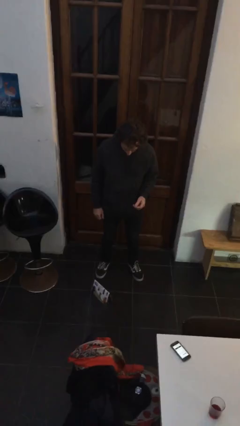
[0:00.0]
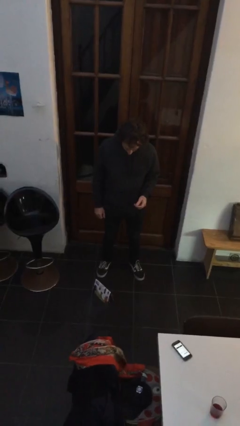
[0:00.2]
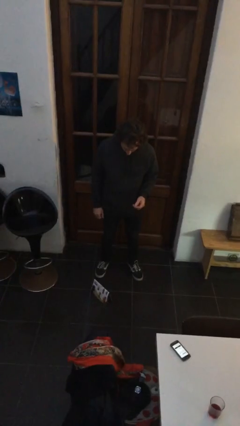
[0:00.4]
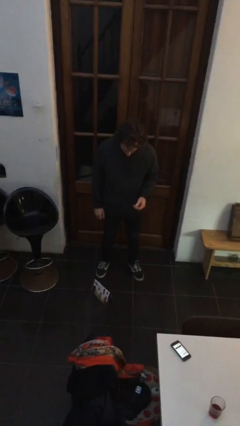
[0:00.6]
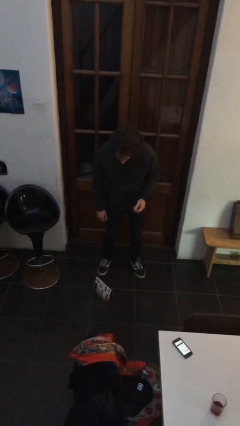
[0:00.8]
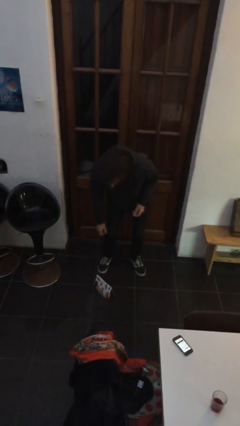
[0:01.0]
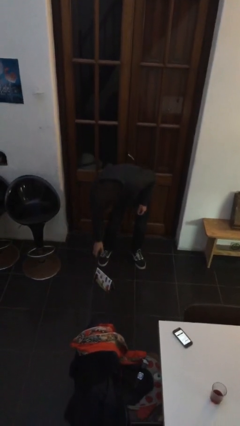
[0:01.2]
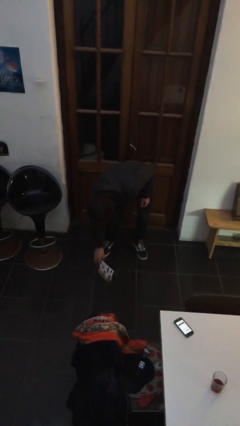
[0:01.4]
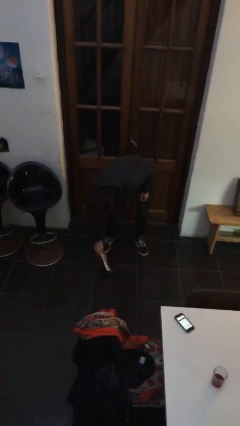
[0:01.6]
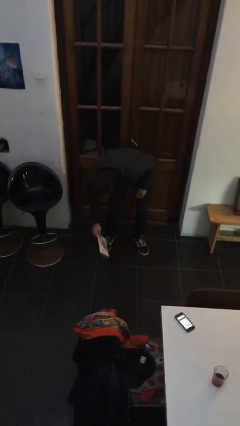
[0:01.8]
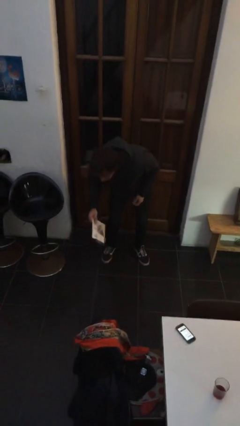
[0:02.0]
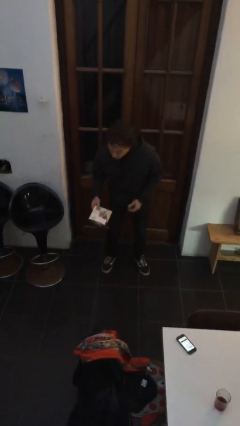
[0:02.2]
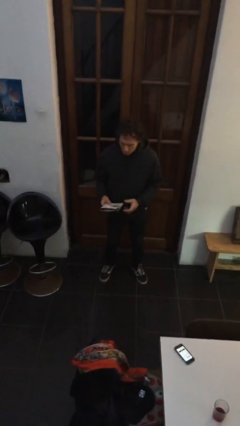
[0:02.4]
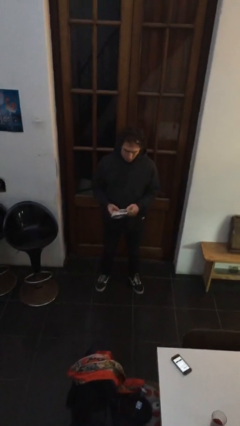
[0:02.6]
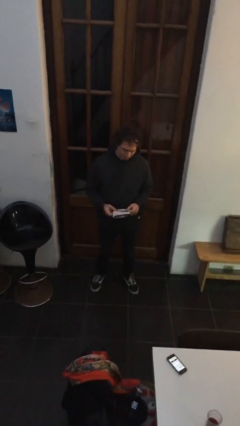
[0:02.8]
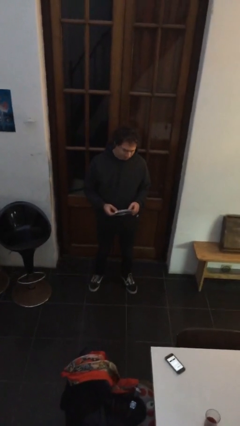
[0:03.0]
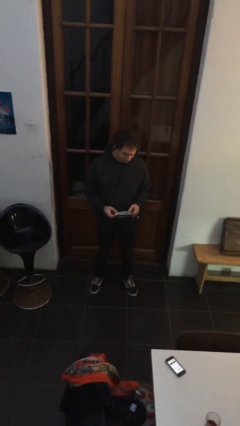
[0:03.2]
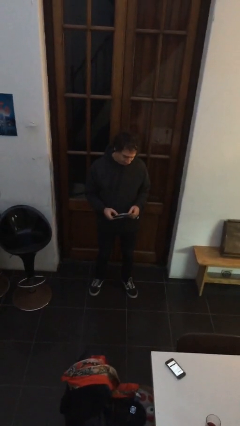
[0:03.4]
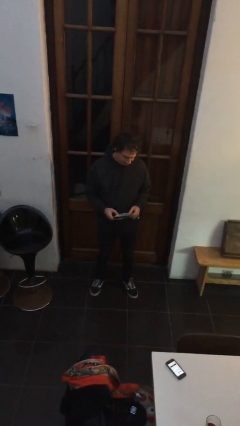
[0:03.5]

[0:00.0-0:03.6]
person picks up object from floor

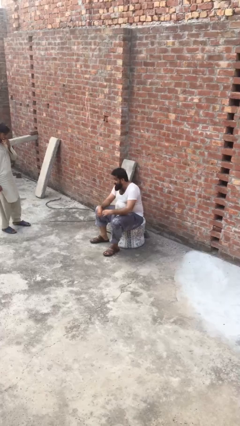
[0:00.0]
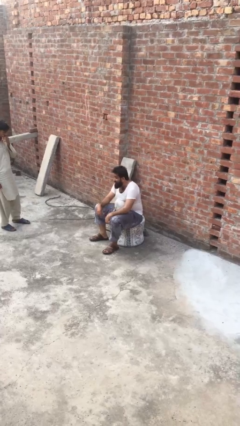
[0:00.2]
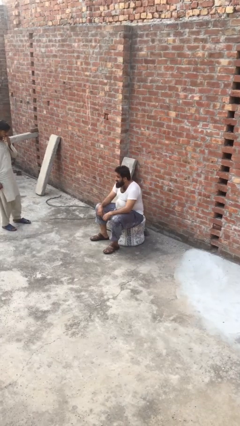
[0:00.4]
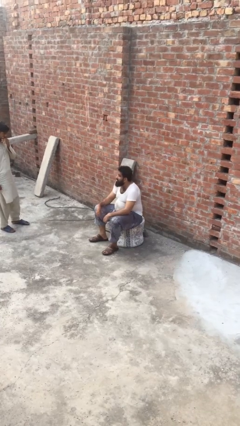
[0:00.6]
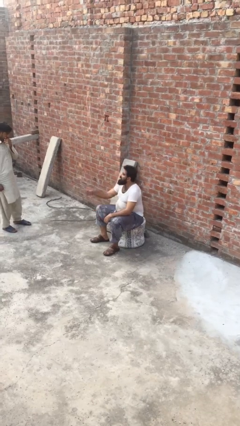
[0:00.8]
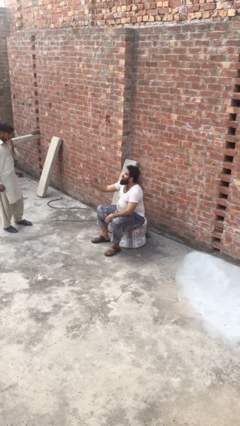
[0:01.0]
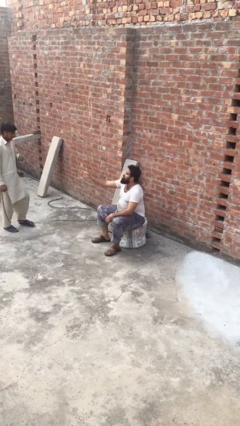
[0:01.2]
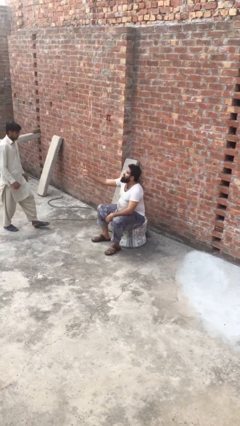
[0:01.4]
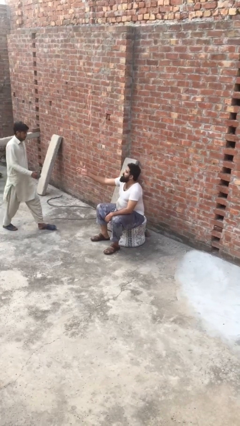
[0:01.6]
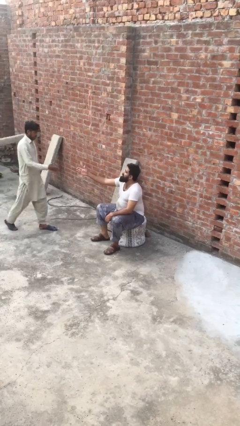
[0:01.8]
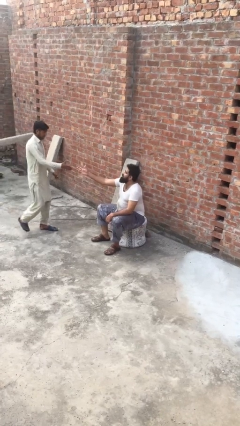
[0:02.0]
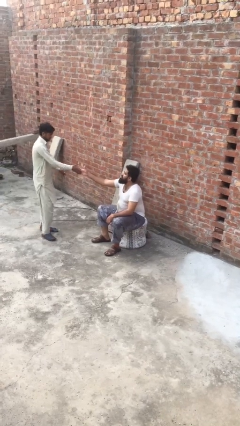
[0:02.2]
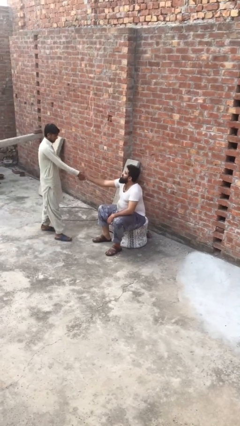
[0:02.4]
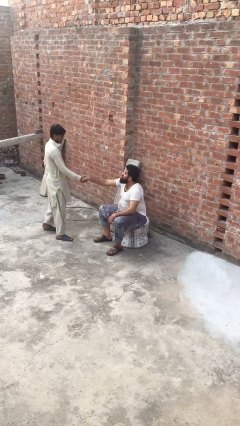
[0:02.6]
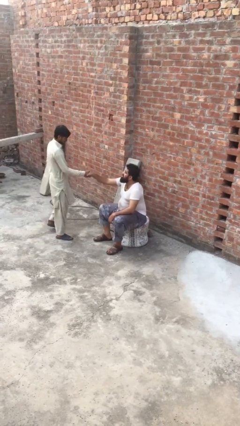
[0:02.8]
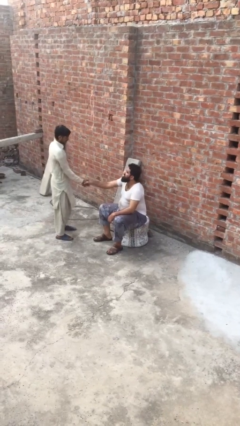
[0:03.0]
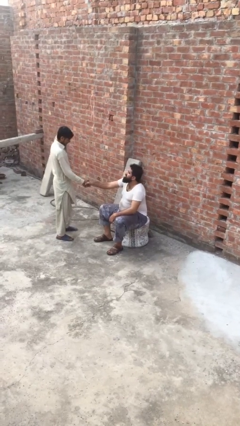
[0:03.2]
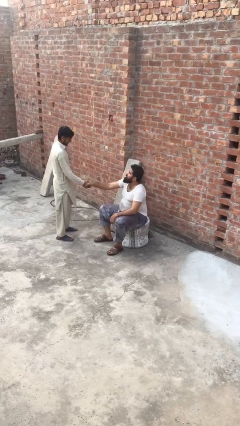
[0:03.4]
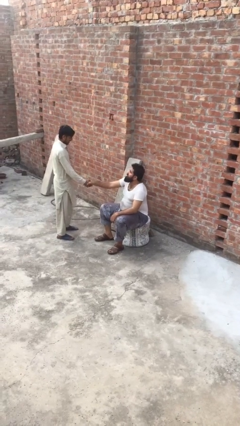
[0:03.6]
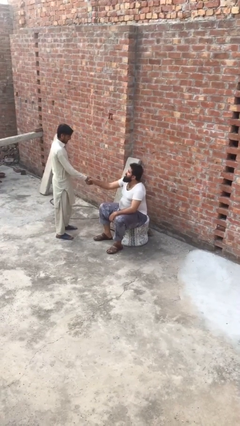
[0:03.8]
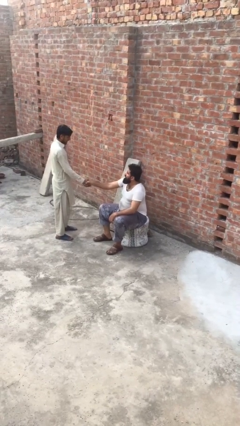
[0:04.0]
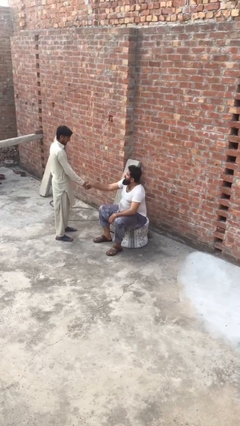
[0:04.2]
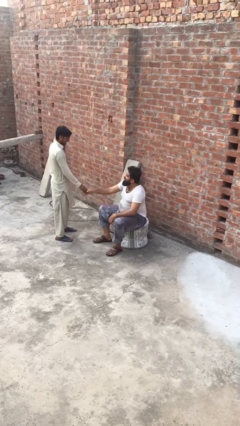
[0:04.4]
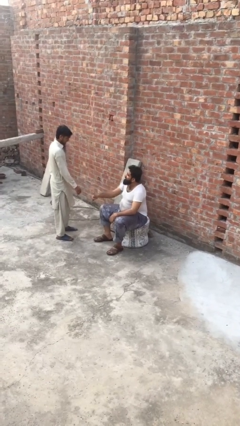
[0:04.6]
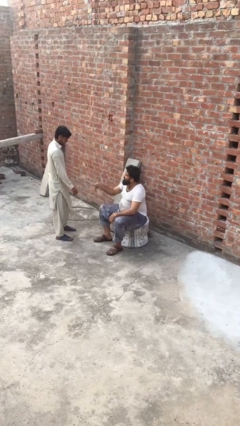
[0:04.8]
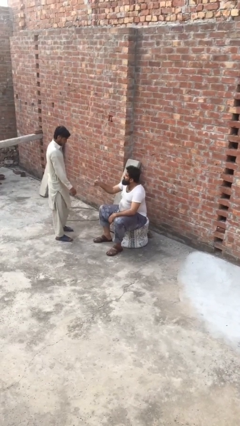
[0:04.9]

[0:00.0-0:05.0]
person shakes hand

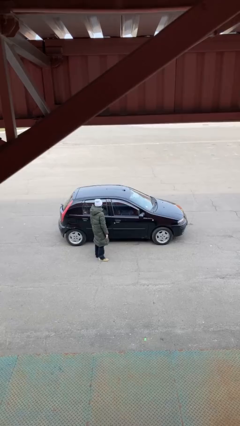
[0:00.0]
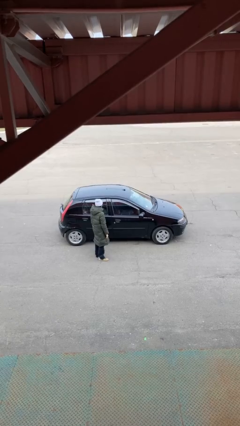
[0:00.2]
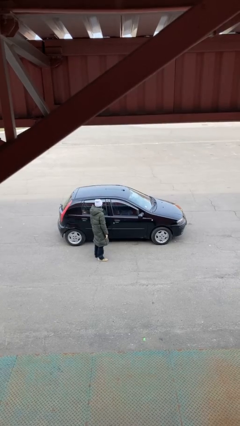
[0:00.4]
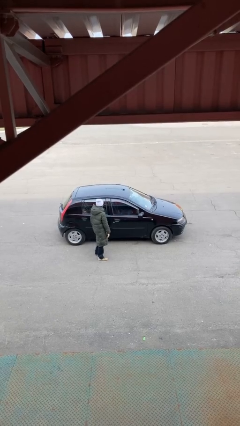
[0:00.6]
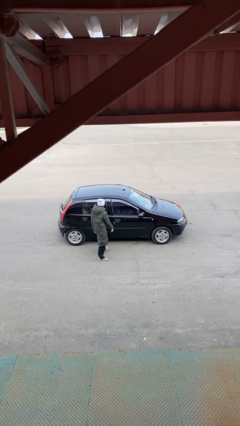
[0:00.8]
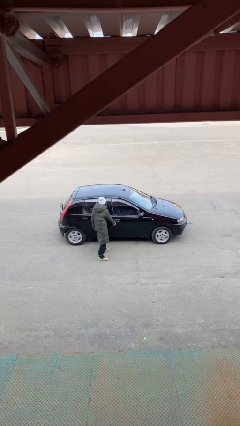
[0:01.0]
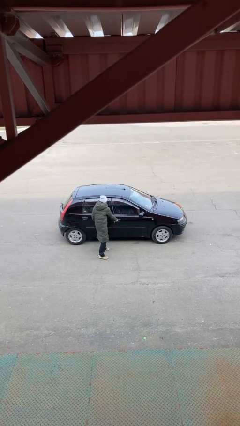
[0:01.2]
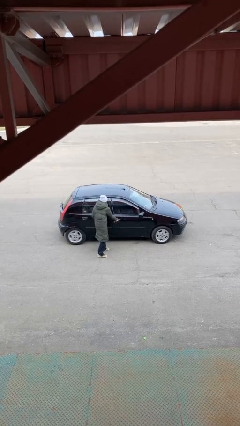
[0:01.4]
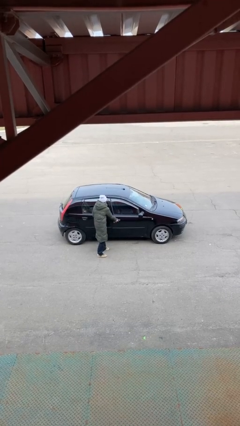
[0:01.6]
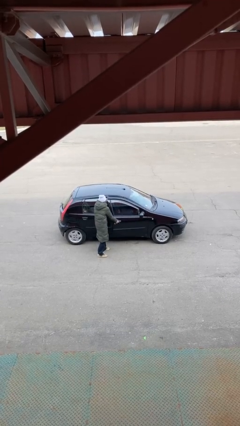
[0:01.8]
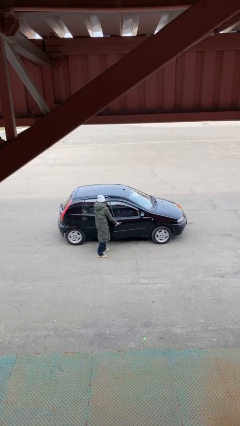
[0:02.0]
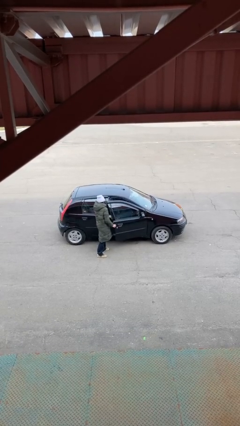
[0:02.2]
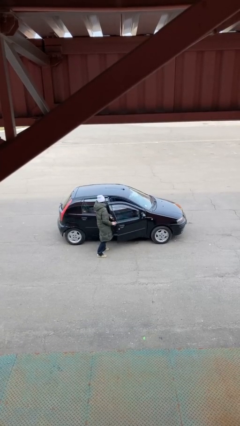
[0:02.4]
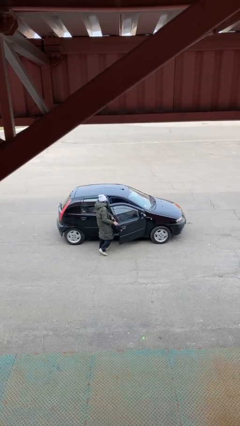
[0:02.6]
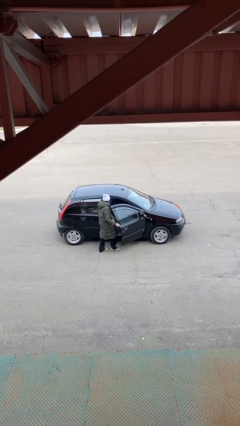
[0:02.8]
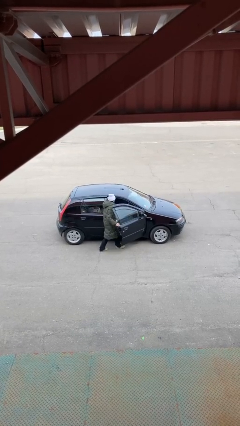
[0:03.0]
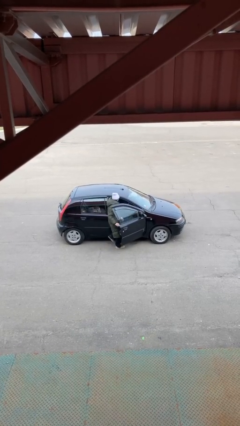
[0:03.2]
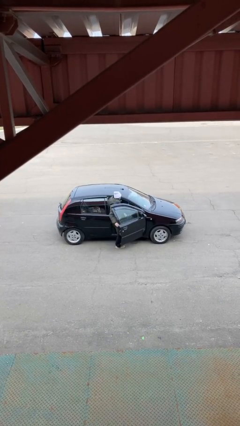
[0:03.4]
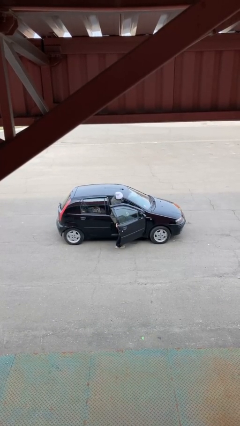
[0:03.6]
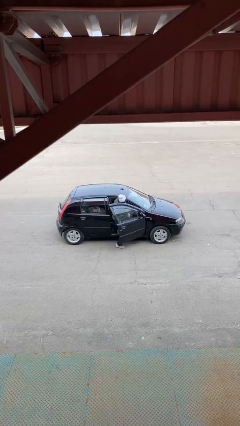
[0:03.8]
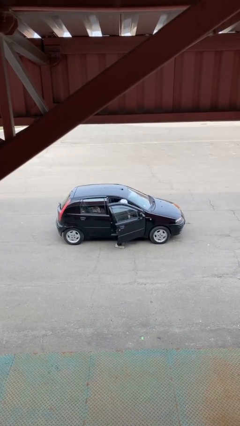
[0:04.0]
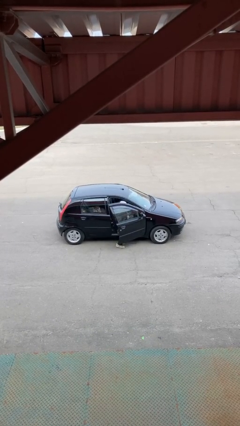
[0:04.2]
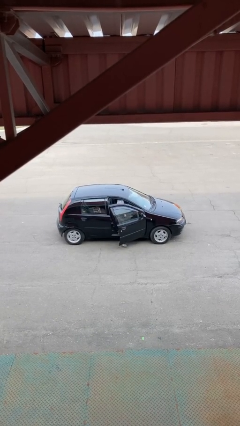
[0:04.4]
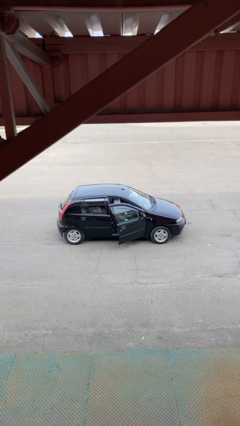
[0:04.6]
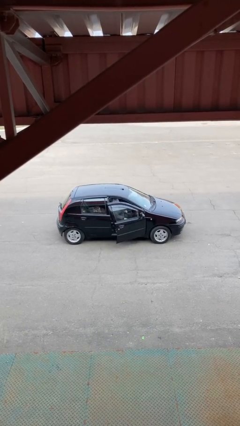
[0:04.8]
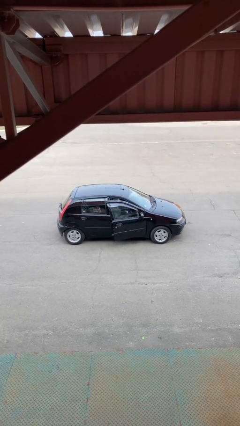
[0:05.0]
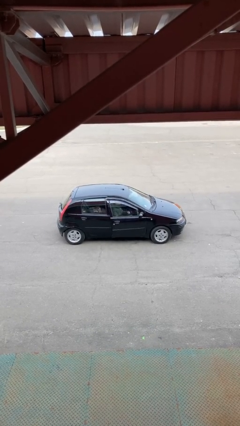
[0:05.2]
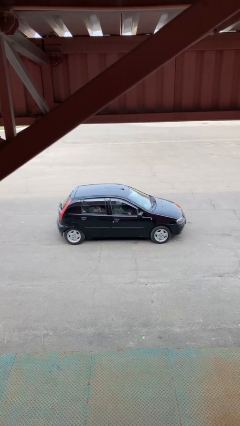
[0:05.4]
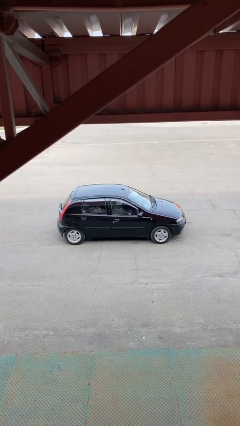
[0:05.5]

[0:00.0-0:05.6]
car picks up person

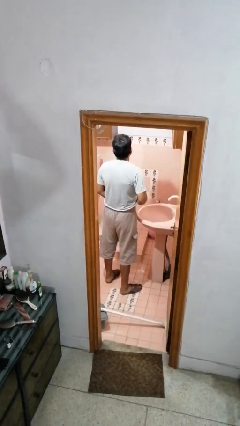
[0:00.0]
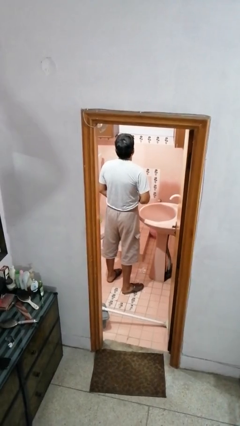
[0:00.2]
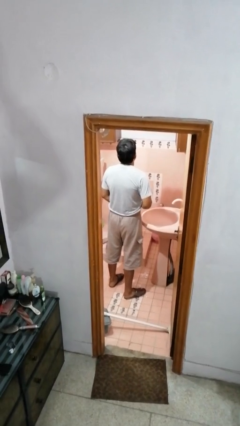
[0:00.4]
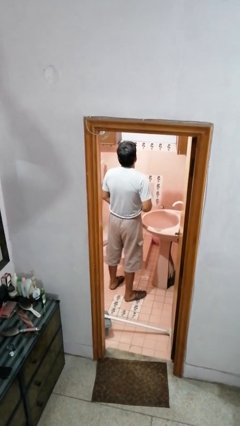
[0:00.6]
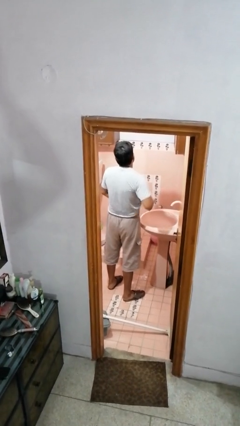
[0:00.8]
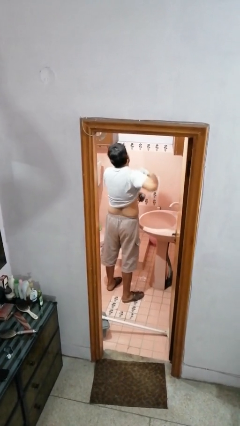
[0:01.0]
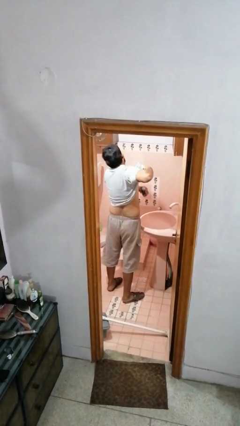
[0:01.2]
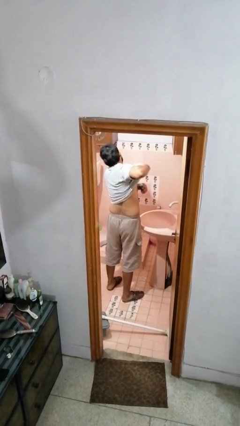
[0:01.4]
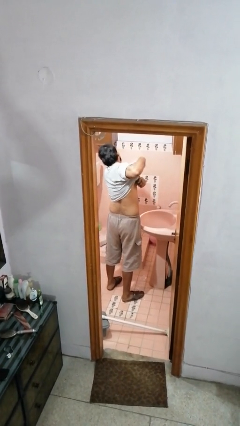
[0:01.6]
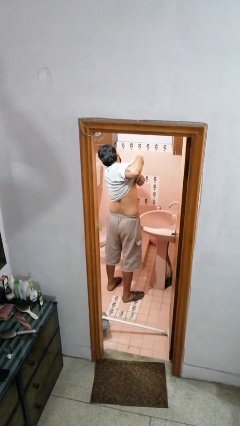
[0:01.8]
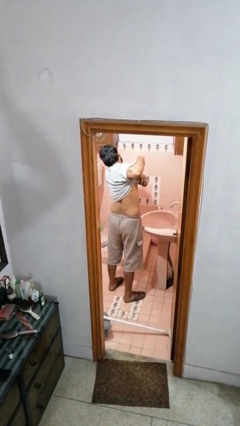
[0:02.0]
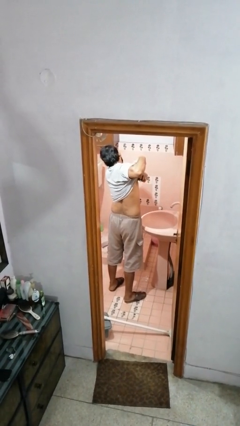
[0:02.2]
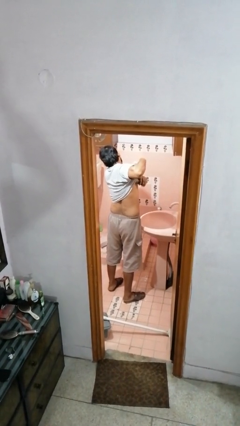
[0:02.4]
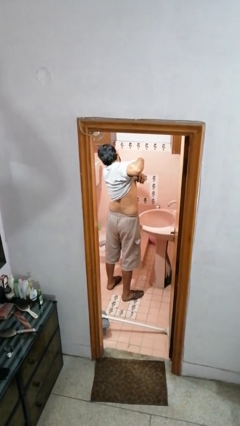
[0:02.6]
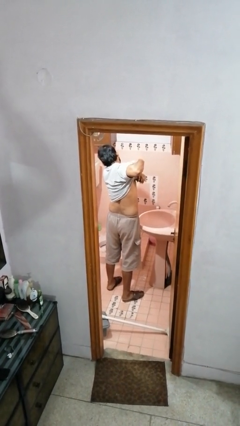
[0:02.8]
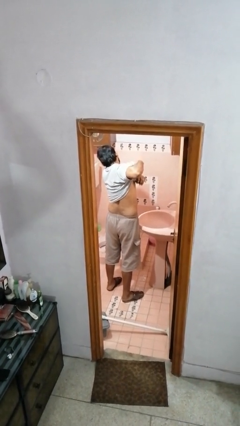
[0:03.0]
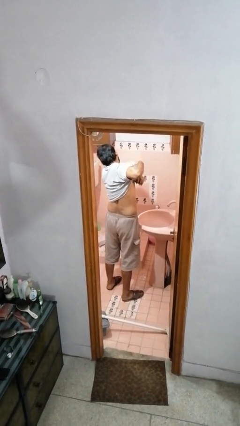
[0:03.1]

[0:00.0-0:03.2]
person applies deodorant

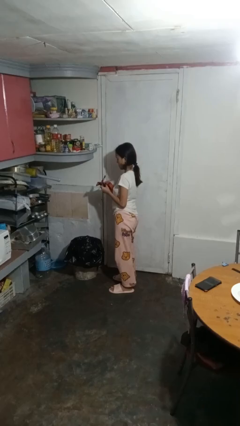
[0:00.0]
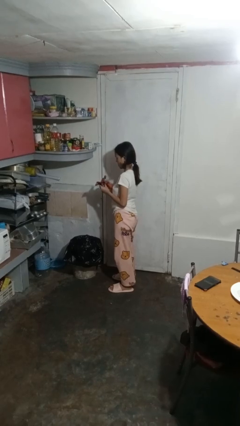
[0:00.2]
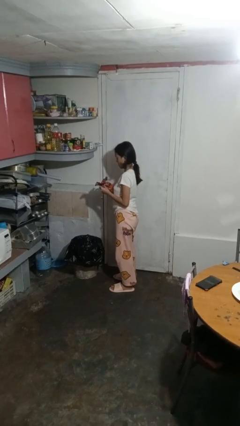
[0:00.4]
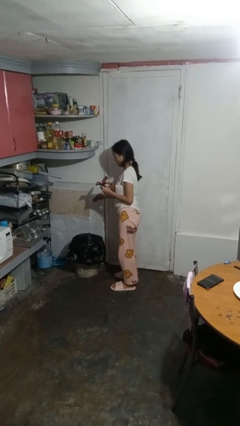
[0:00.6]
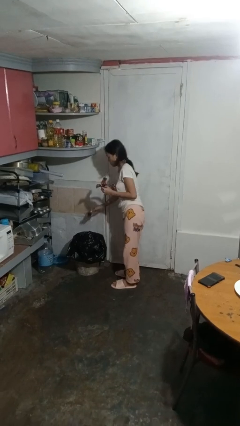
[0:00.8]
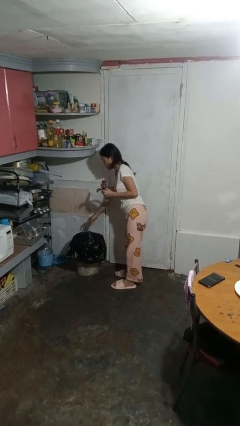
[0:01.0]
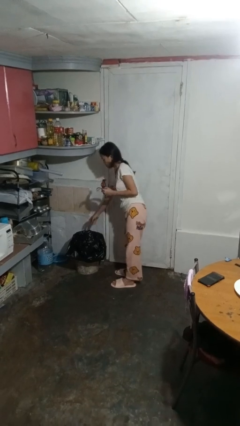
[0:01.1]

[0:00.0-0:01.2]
person discards trash
